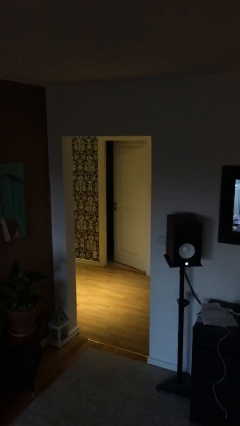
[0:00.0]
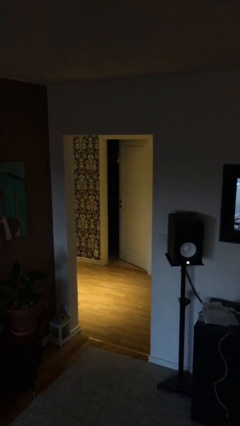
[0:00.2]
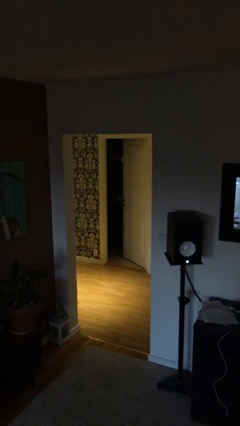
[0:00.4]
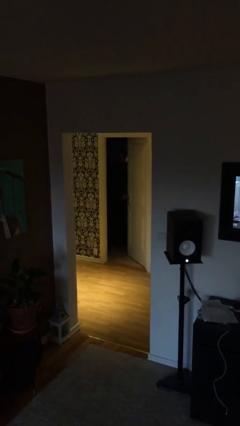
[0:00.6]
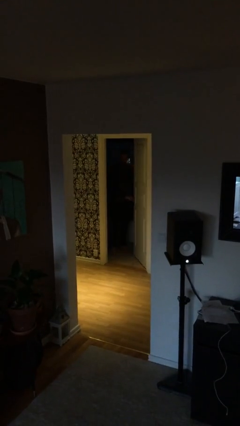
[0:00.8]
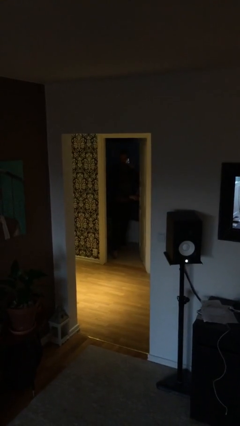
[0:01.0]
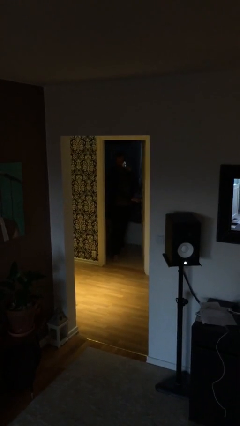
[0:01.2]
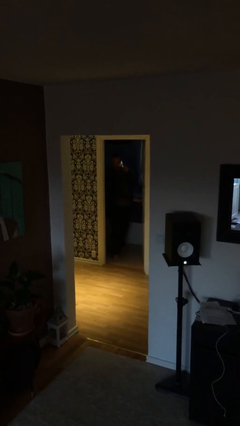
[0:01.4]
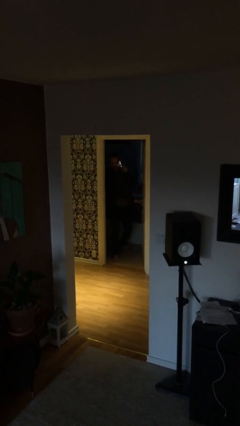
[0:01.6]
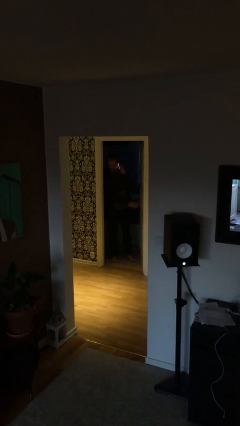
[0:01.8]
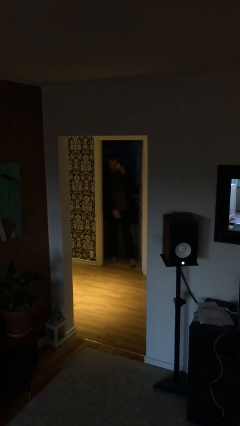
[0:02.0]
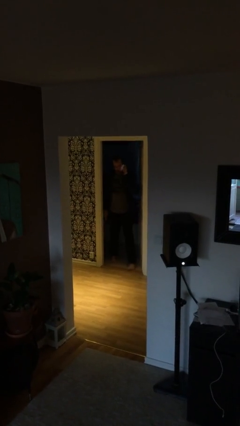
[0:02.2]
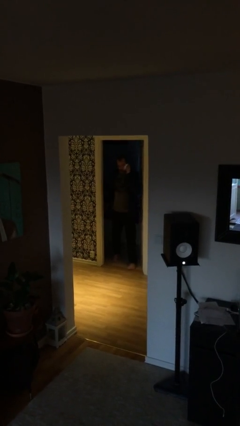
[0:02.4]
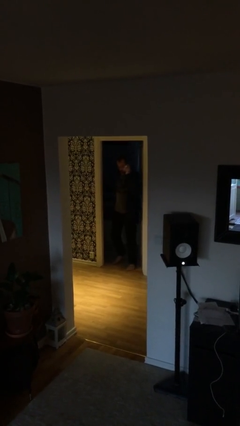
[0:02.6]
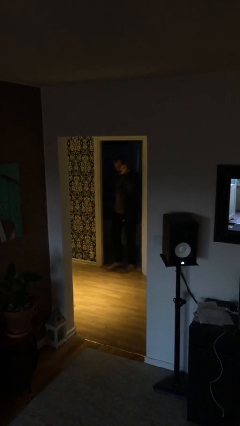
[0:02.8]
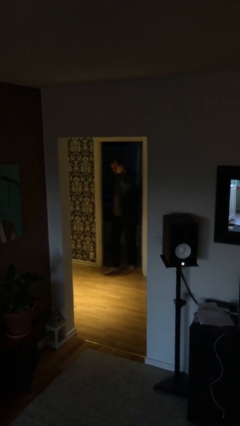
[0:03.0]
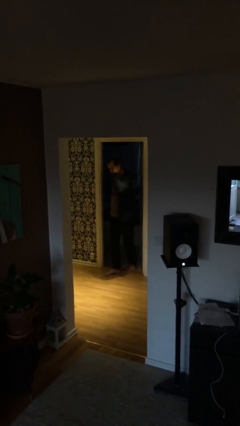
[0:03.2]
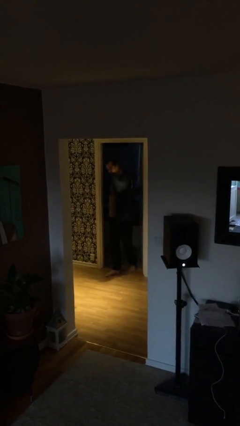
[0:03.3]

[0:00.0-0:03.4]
person opens facility door

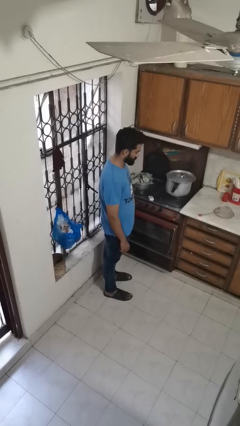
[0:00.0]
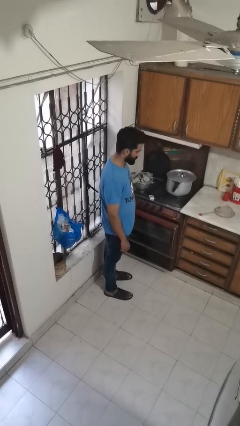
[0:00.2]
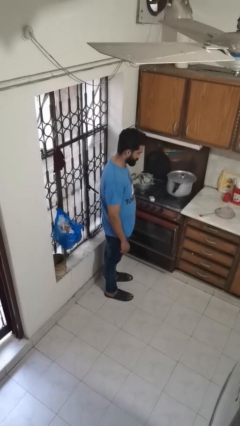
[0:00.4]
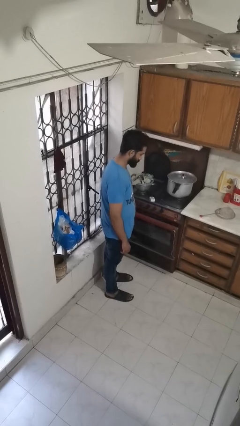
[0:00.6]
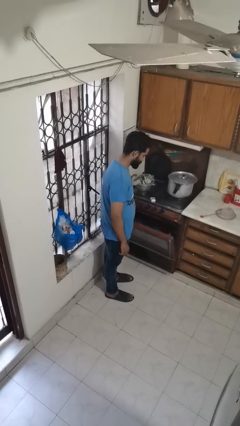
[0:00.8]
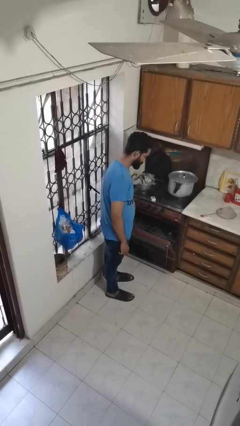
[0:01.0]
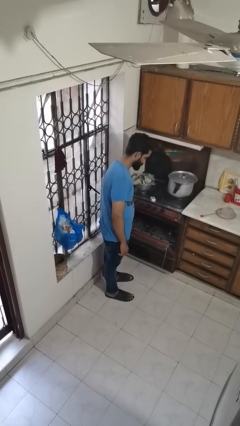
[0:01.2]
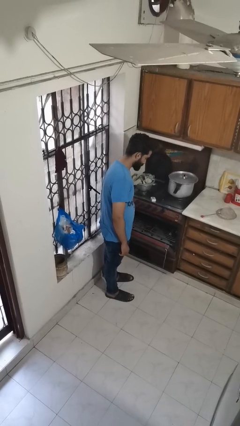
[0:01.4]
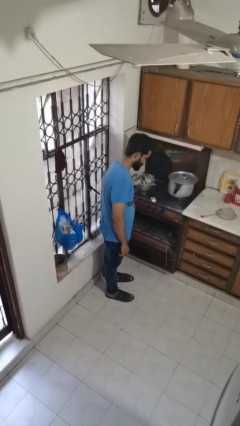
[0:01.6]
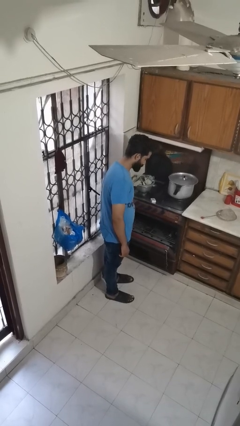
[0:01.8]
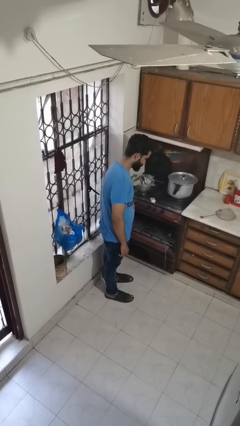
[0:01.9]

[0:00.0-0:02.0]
person opens oven door

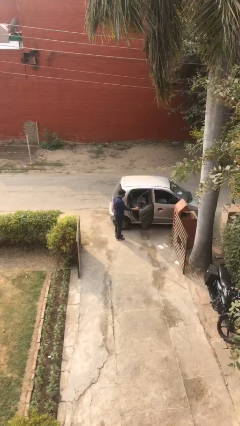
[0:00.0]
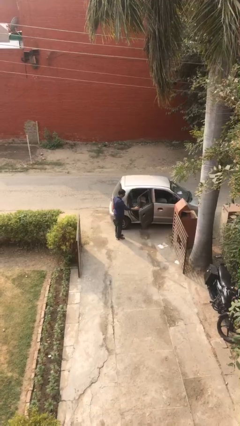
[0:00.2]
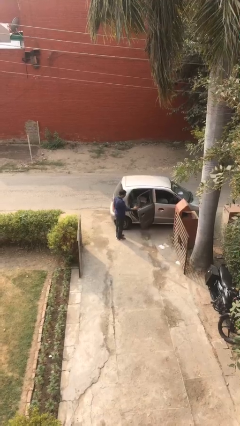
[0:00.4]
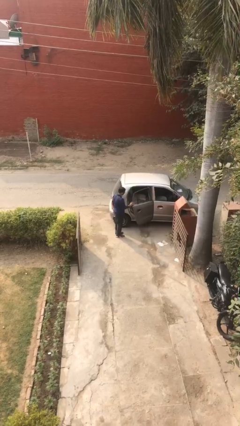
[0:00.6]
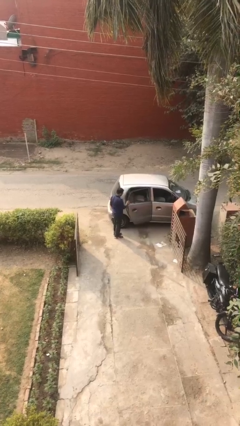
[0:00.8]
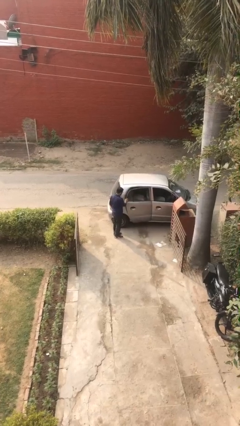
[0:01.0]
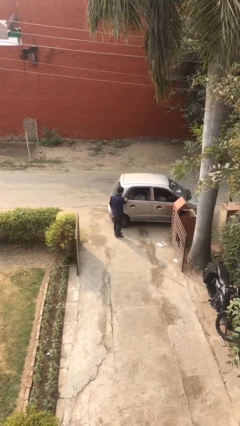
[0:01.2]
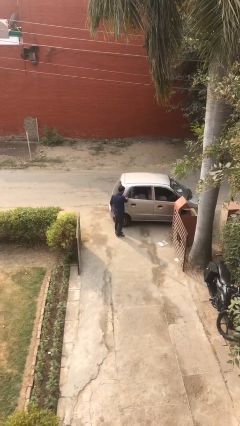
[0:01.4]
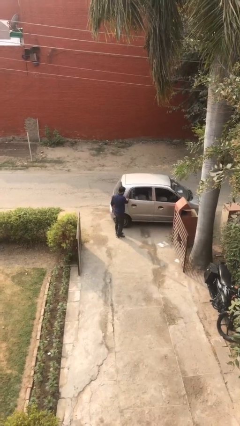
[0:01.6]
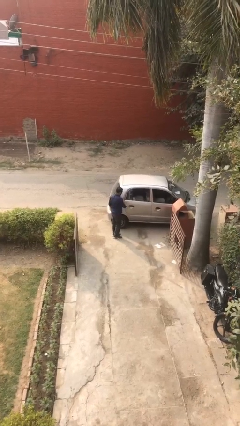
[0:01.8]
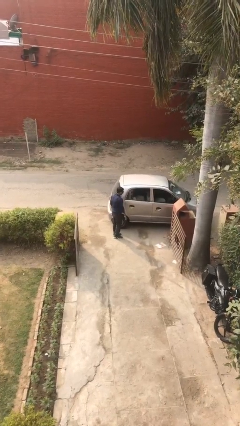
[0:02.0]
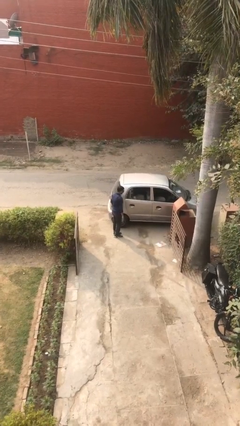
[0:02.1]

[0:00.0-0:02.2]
person closes car door

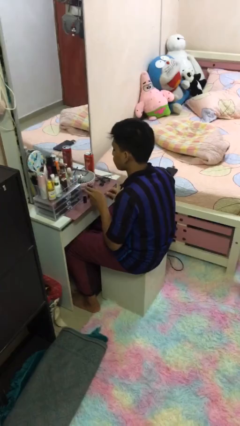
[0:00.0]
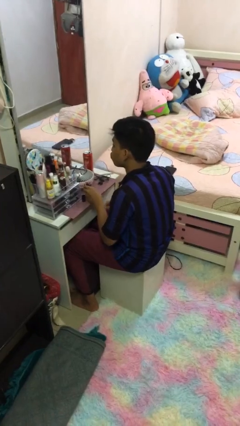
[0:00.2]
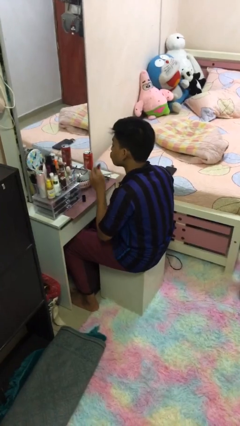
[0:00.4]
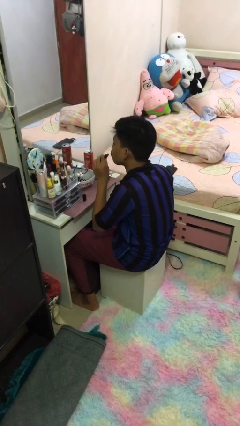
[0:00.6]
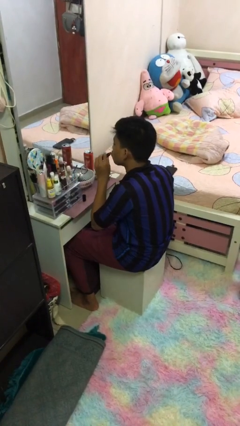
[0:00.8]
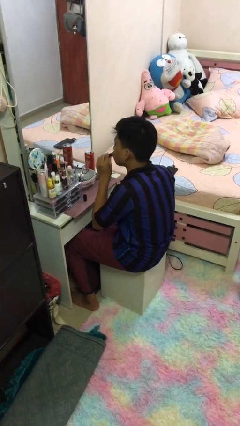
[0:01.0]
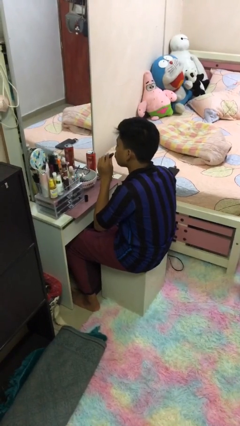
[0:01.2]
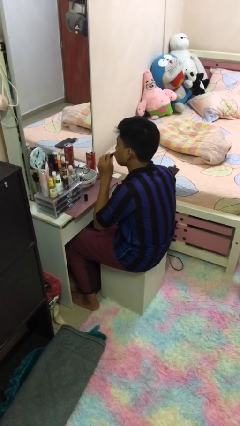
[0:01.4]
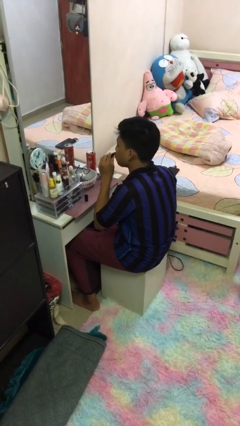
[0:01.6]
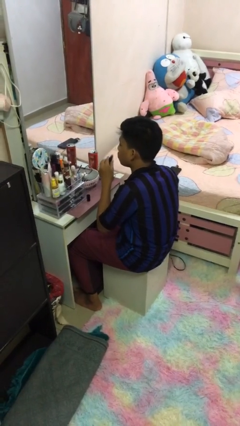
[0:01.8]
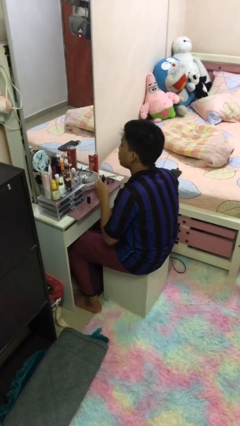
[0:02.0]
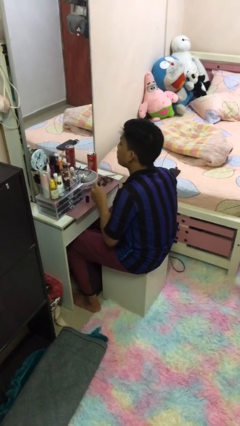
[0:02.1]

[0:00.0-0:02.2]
person applies lip makeup

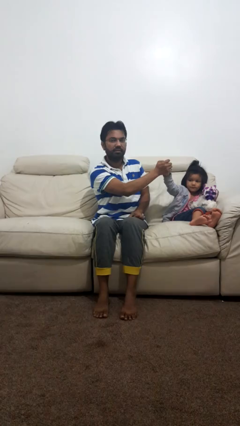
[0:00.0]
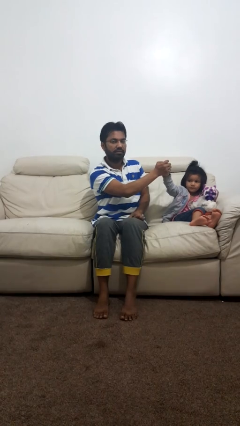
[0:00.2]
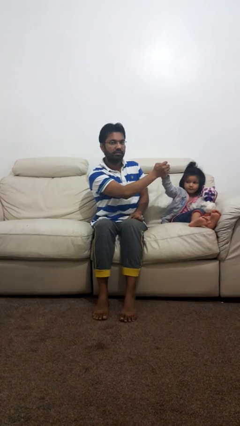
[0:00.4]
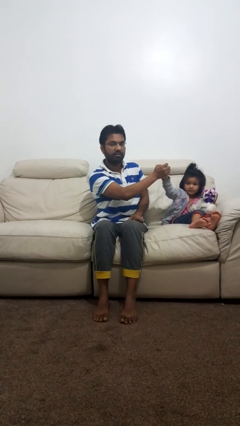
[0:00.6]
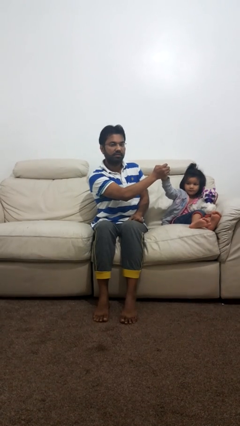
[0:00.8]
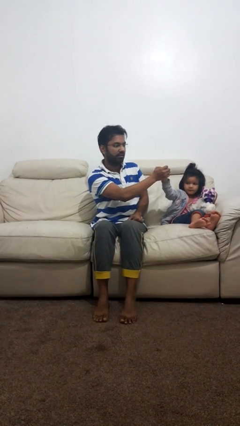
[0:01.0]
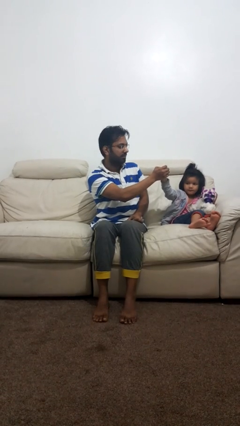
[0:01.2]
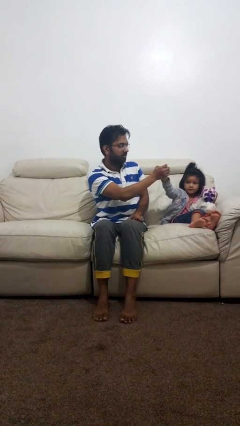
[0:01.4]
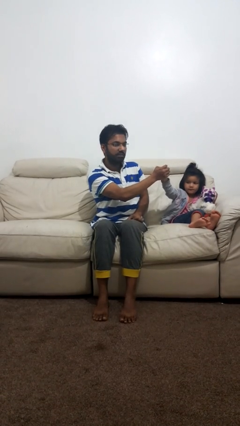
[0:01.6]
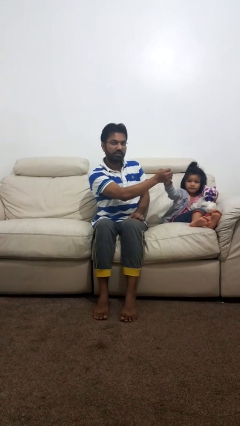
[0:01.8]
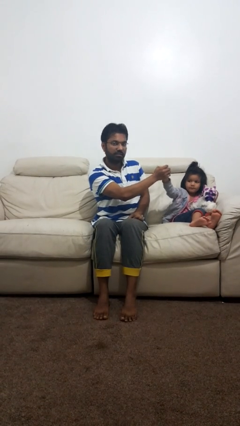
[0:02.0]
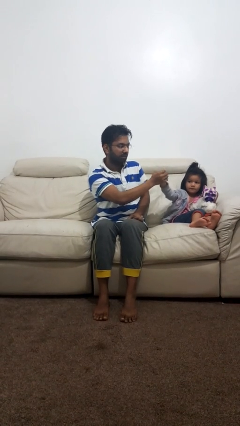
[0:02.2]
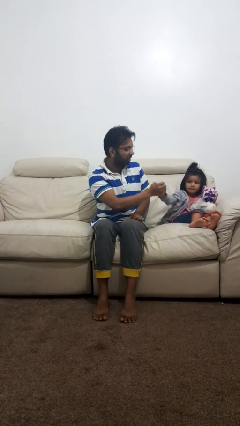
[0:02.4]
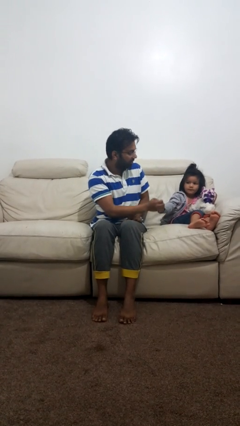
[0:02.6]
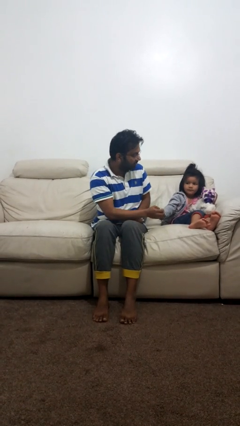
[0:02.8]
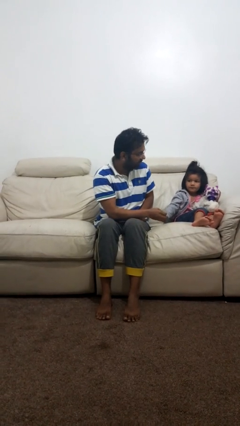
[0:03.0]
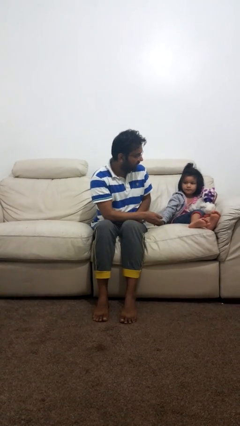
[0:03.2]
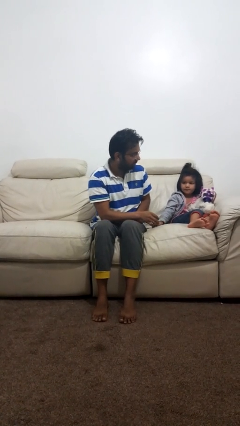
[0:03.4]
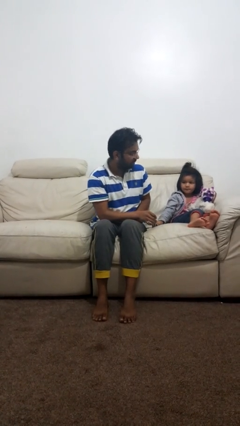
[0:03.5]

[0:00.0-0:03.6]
person highfives hand

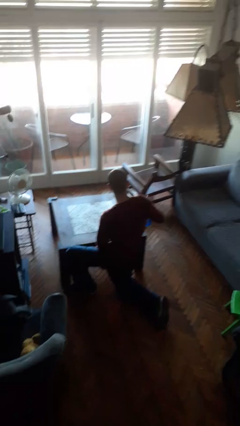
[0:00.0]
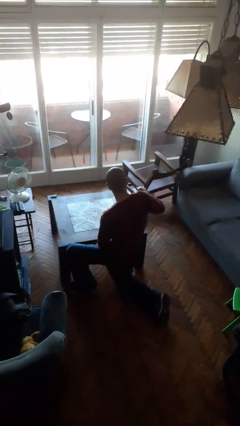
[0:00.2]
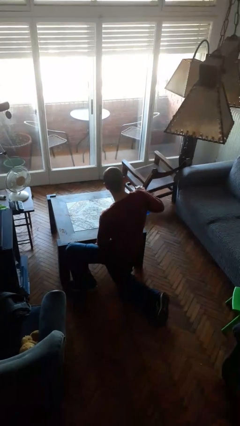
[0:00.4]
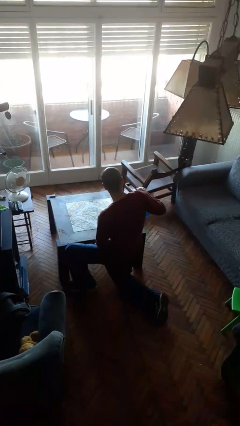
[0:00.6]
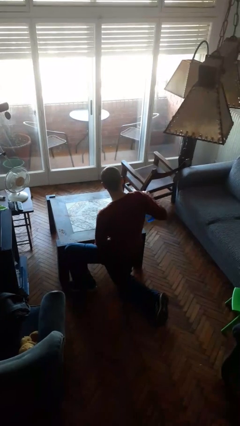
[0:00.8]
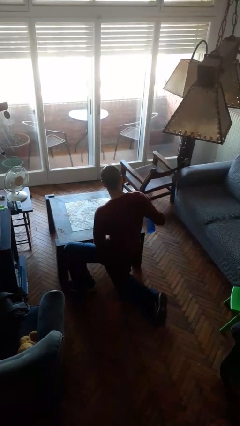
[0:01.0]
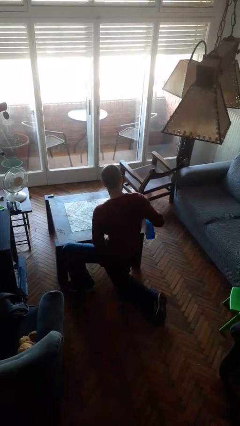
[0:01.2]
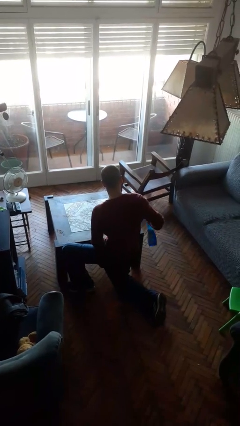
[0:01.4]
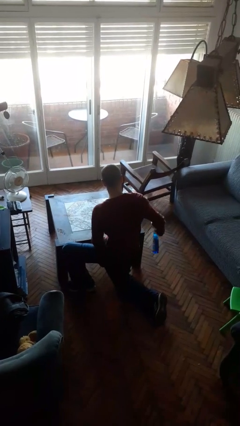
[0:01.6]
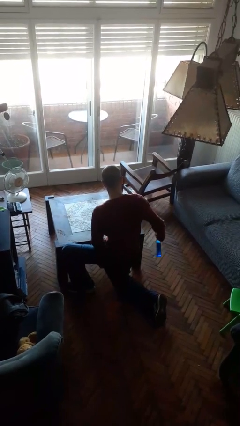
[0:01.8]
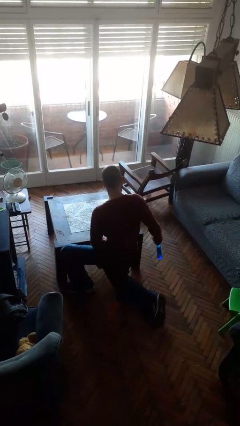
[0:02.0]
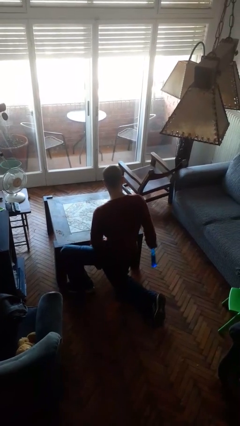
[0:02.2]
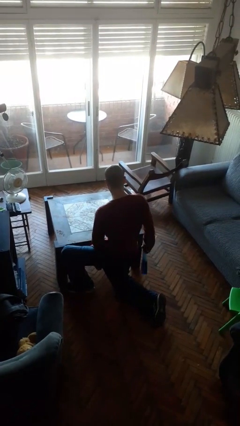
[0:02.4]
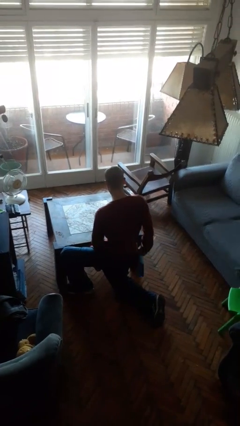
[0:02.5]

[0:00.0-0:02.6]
person sprays from bottle

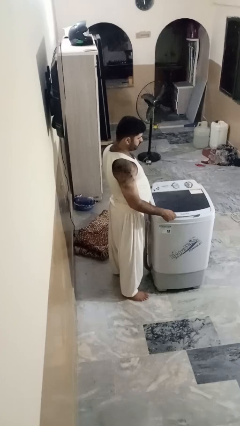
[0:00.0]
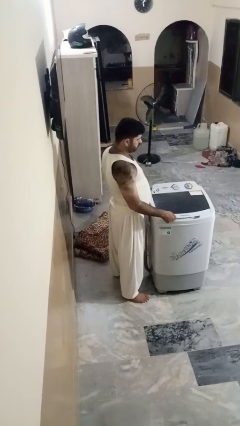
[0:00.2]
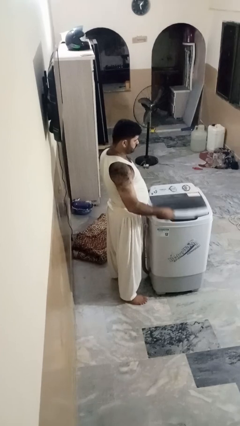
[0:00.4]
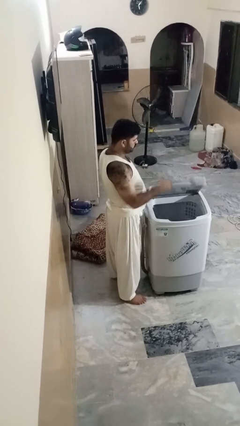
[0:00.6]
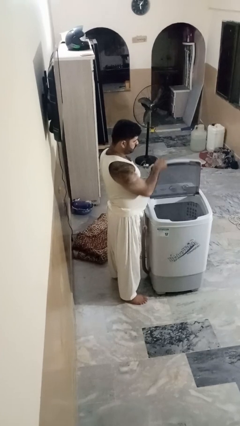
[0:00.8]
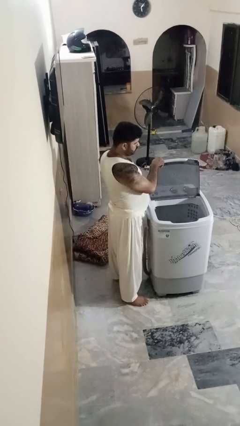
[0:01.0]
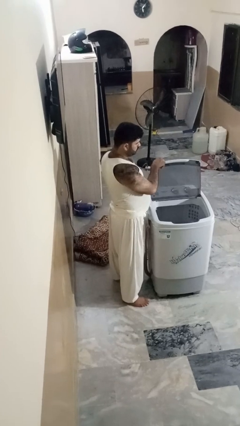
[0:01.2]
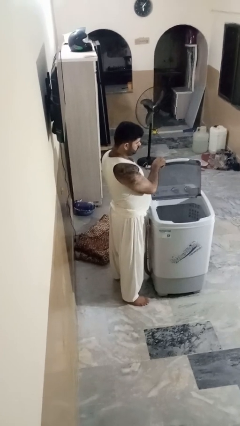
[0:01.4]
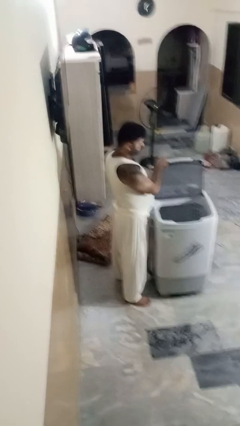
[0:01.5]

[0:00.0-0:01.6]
person opens clothes washer
